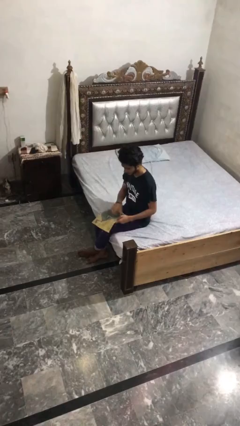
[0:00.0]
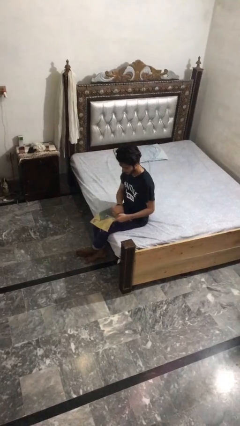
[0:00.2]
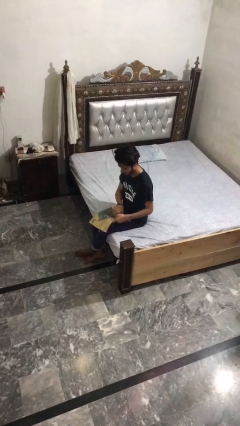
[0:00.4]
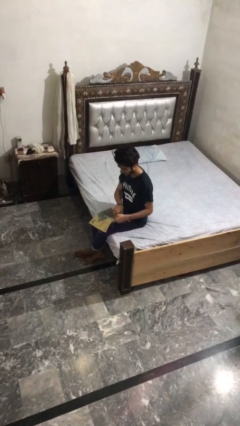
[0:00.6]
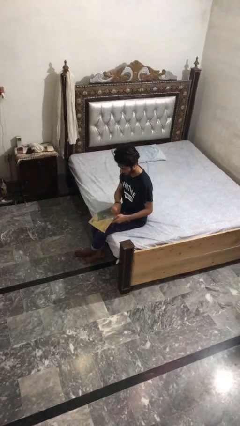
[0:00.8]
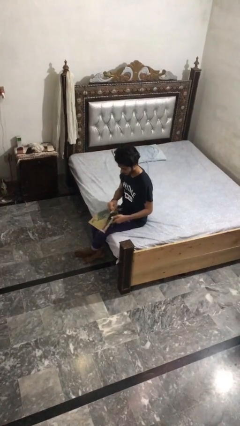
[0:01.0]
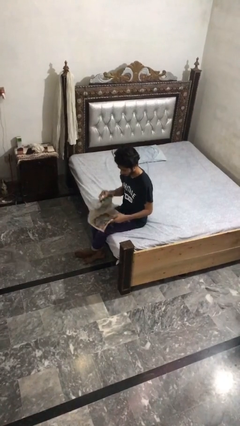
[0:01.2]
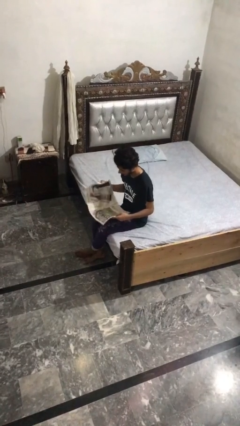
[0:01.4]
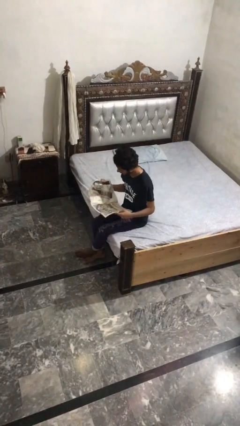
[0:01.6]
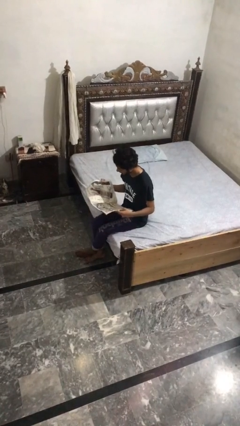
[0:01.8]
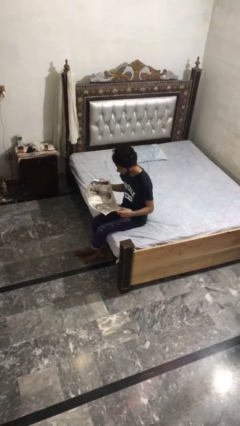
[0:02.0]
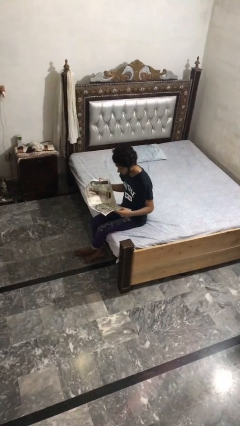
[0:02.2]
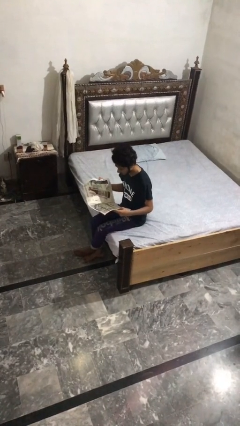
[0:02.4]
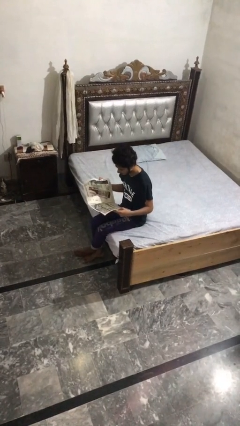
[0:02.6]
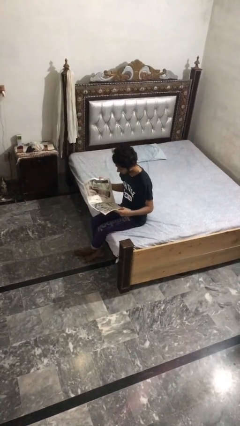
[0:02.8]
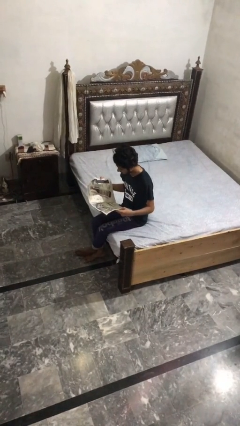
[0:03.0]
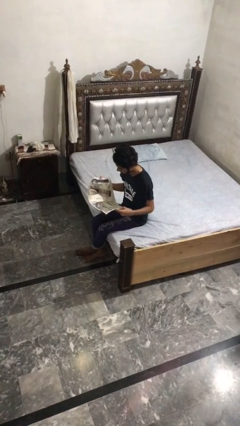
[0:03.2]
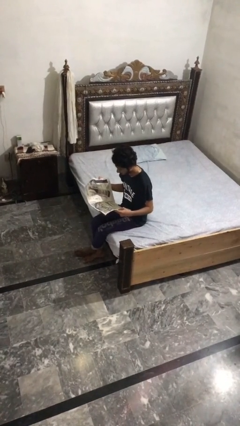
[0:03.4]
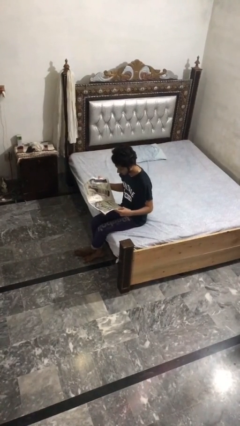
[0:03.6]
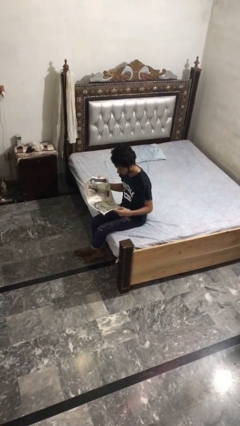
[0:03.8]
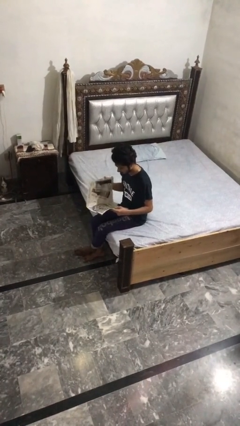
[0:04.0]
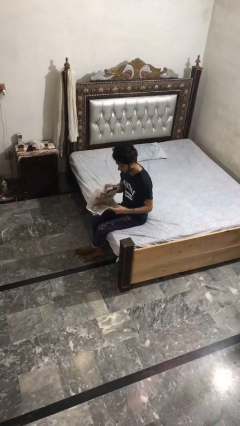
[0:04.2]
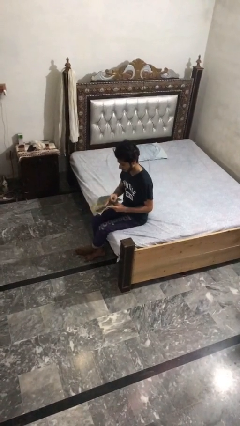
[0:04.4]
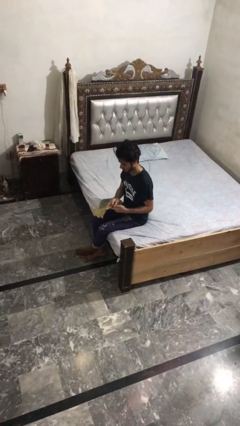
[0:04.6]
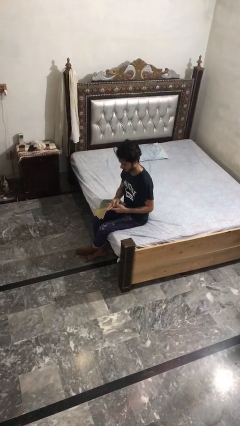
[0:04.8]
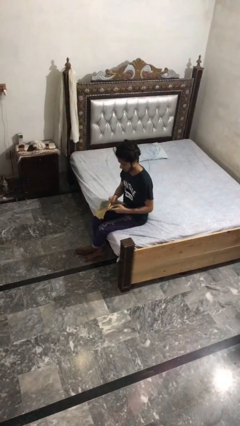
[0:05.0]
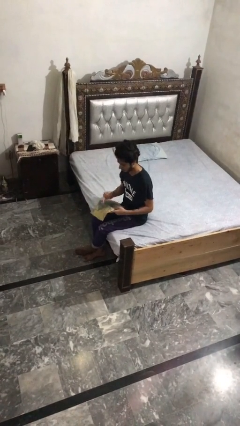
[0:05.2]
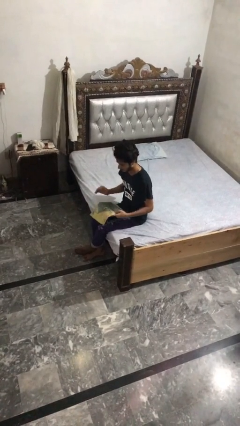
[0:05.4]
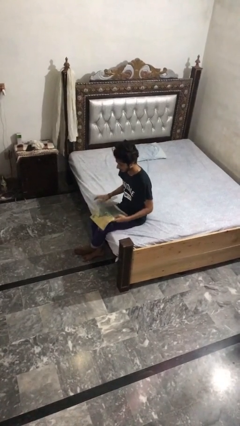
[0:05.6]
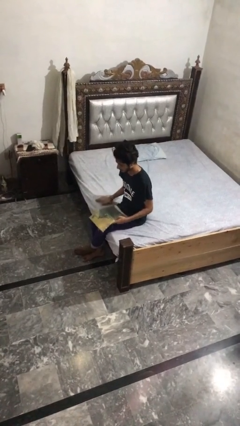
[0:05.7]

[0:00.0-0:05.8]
person reads magazine

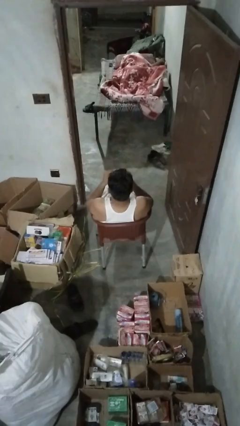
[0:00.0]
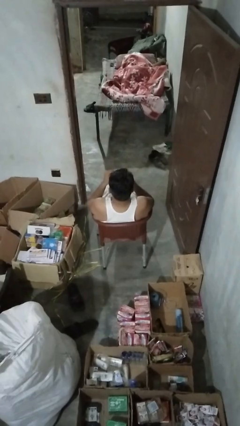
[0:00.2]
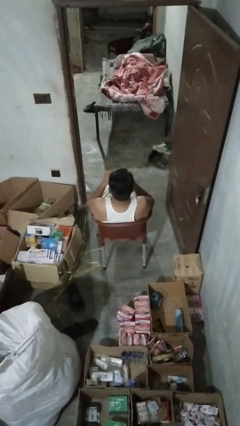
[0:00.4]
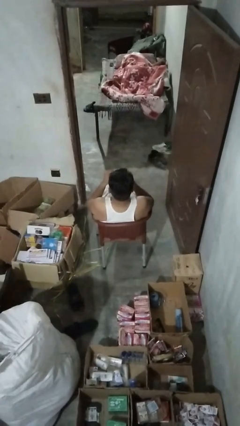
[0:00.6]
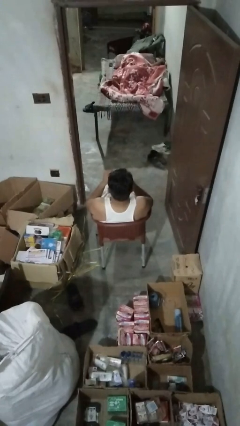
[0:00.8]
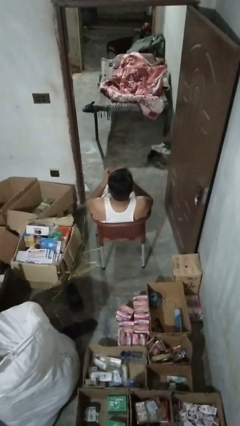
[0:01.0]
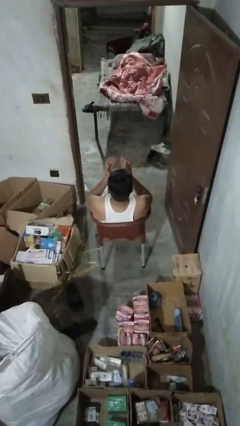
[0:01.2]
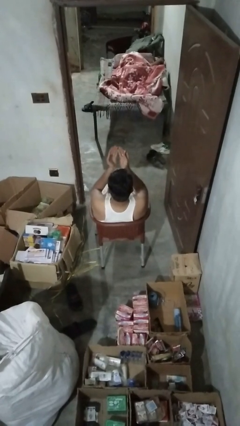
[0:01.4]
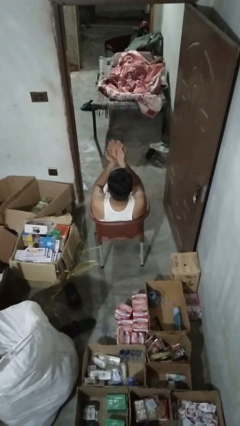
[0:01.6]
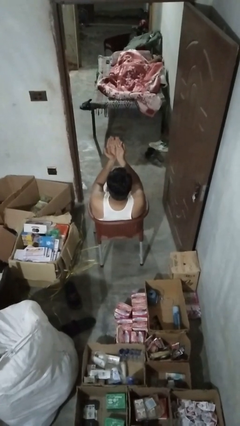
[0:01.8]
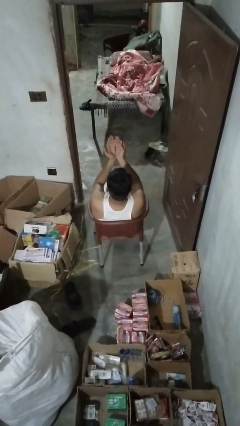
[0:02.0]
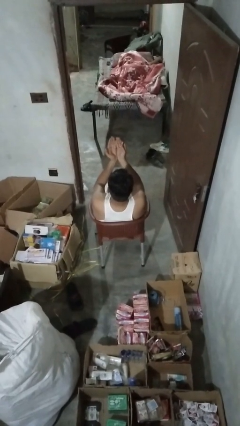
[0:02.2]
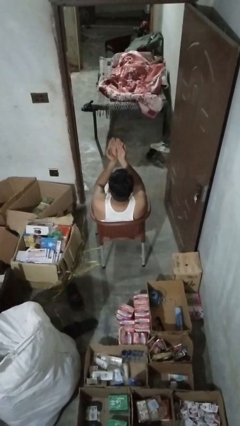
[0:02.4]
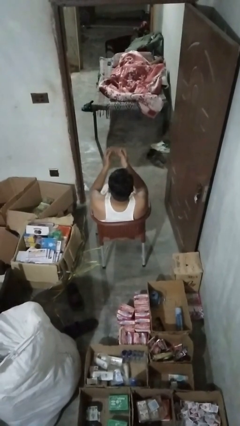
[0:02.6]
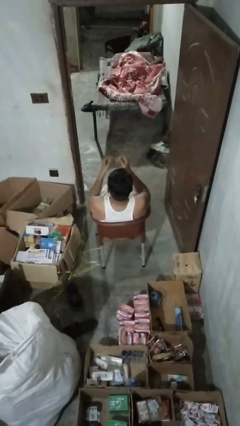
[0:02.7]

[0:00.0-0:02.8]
person prays

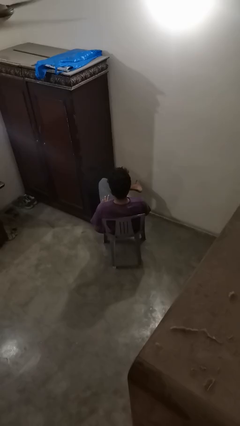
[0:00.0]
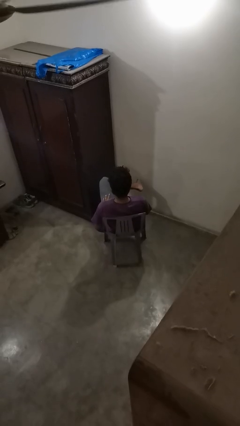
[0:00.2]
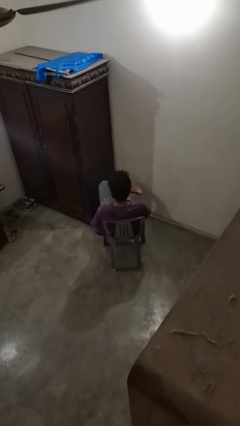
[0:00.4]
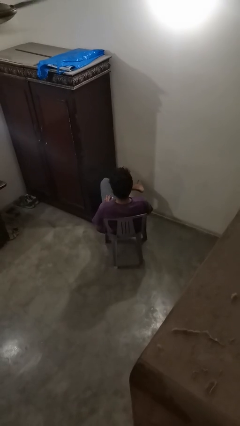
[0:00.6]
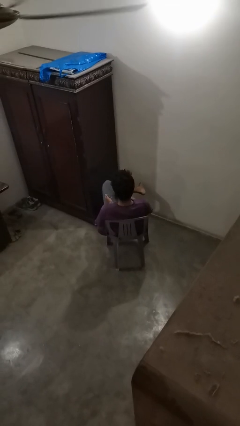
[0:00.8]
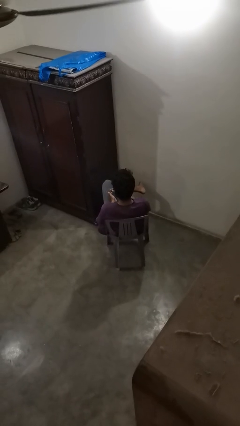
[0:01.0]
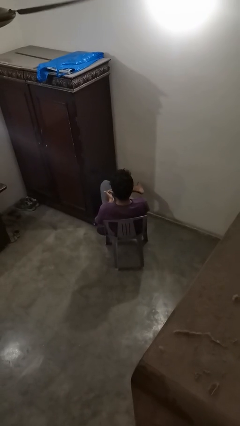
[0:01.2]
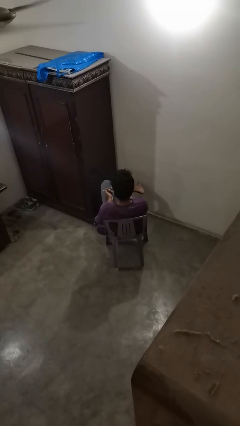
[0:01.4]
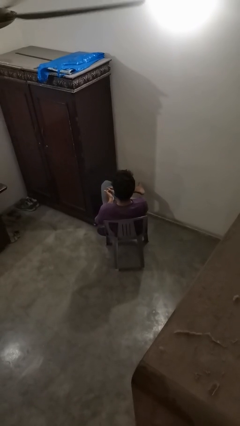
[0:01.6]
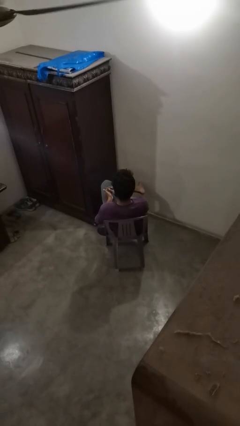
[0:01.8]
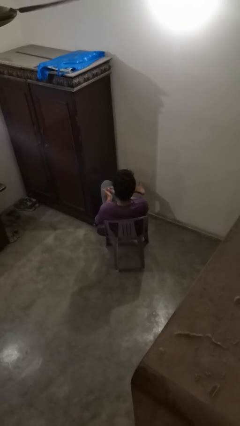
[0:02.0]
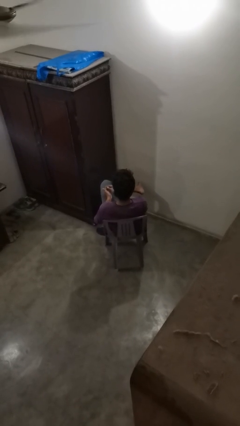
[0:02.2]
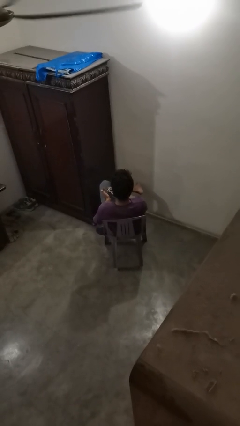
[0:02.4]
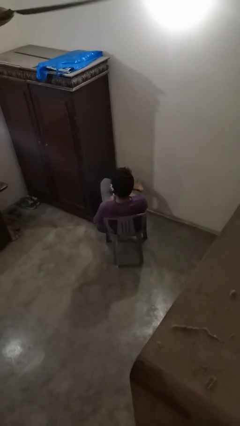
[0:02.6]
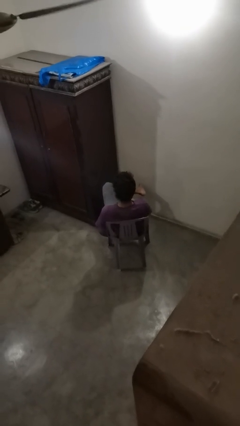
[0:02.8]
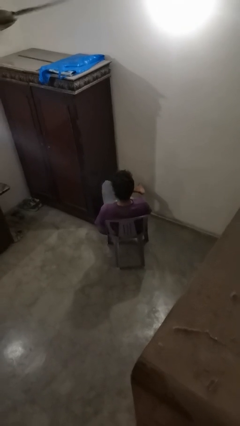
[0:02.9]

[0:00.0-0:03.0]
person files fingernails

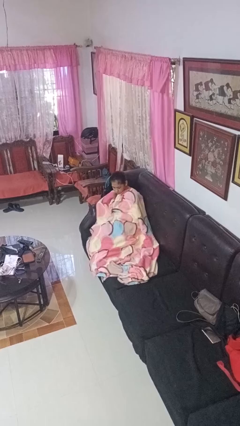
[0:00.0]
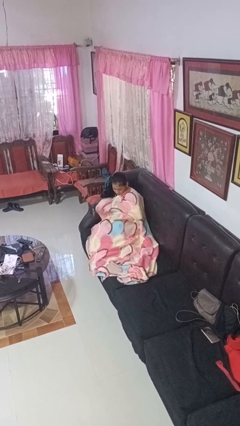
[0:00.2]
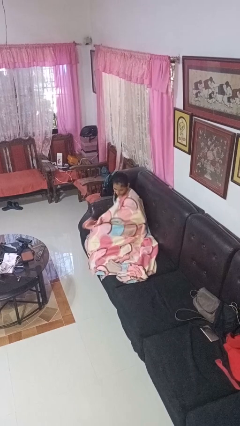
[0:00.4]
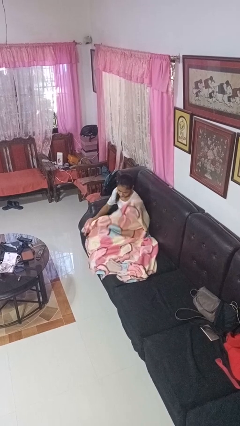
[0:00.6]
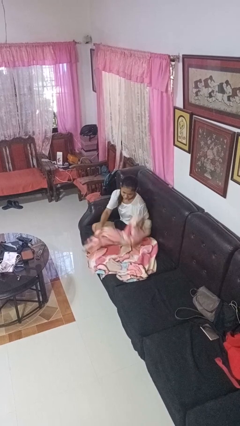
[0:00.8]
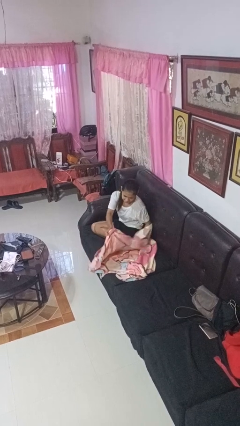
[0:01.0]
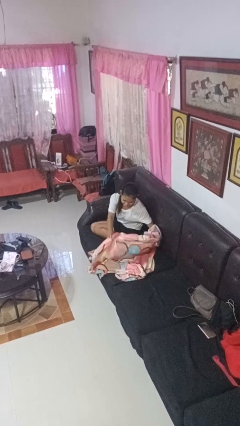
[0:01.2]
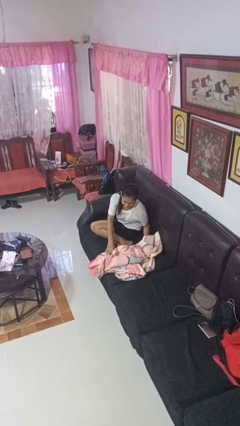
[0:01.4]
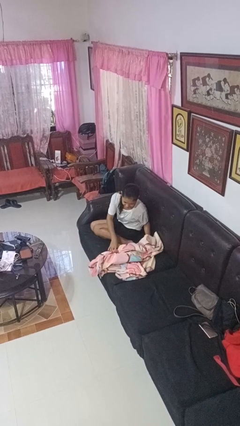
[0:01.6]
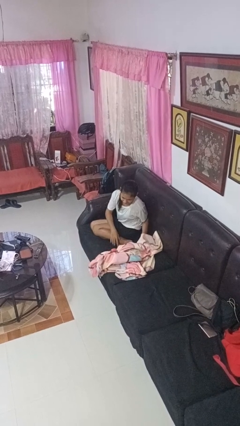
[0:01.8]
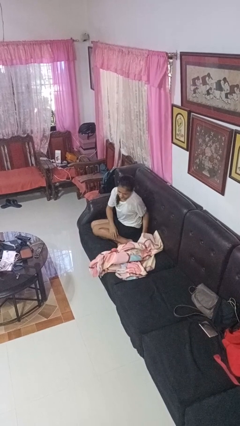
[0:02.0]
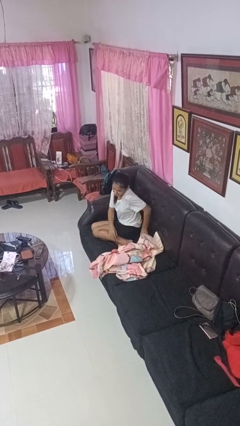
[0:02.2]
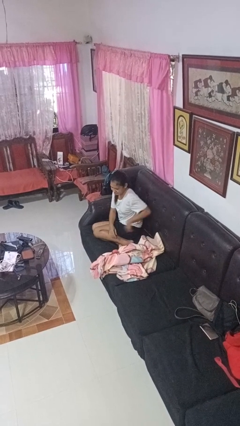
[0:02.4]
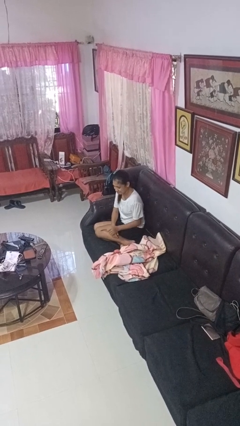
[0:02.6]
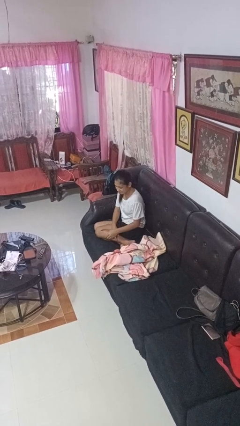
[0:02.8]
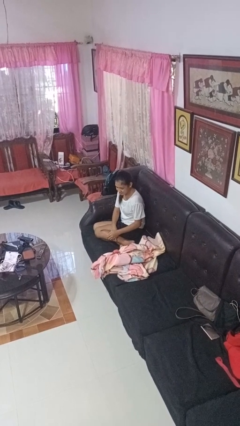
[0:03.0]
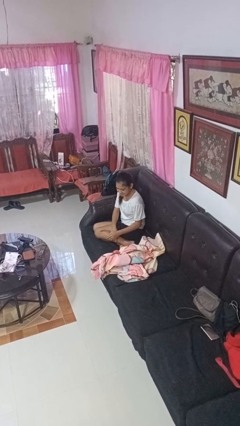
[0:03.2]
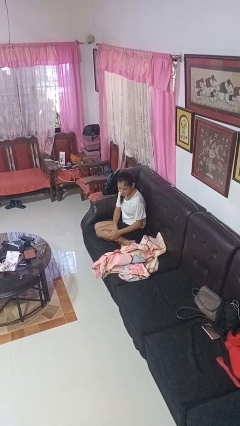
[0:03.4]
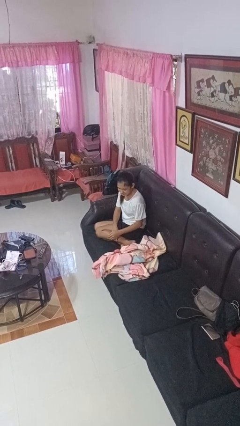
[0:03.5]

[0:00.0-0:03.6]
person uncovers with blanket

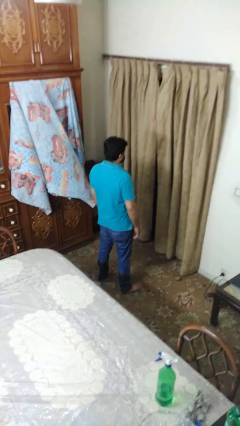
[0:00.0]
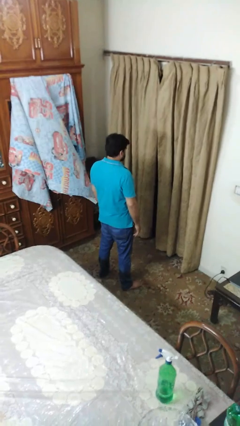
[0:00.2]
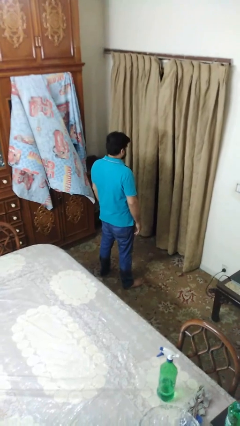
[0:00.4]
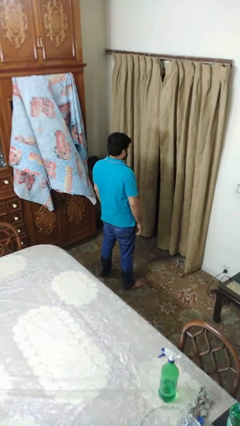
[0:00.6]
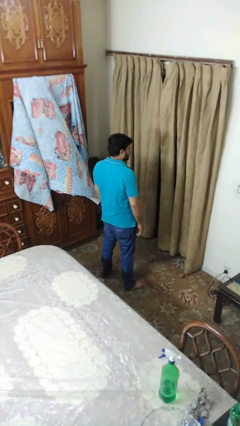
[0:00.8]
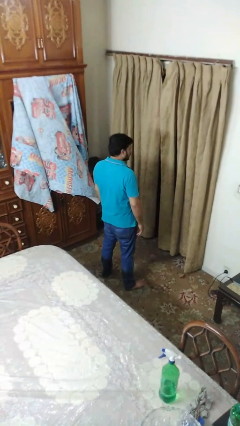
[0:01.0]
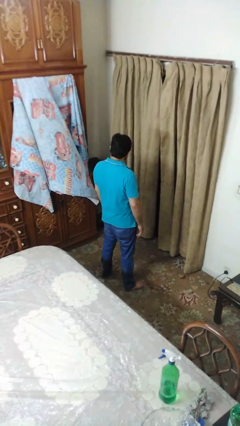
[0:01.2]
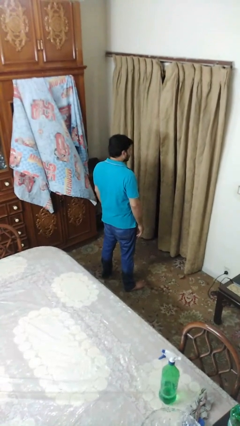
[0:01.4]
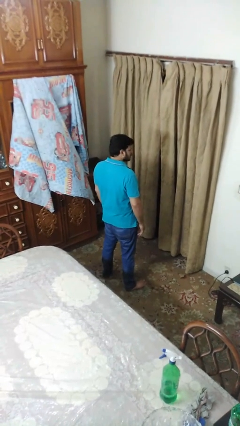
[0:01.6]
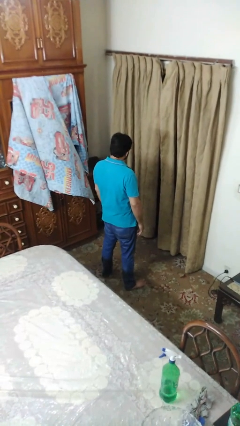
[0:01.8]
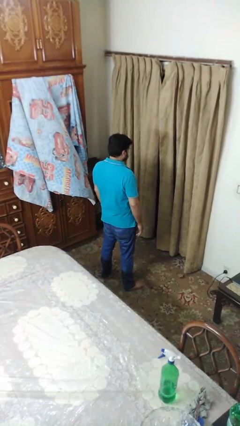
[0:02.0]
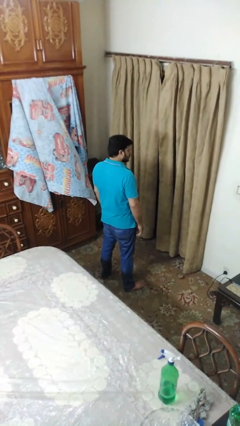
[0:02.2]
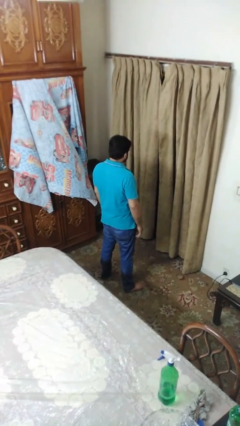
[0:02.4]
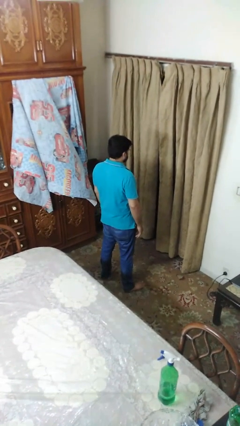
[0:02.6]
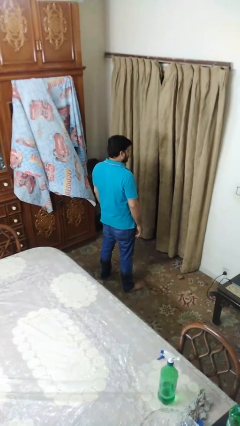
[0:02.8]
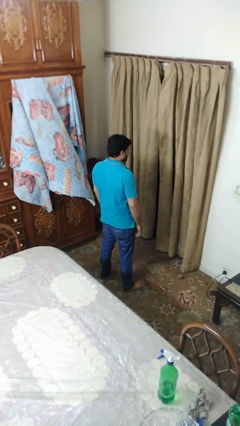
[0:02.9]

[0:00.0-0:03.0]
person shakes head
